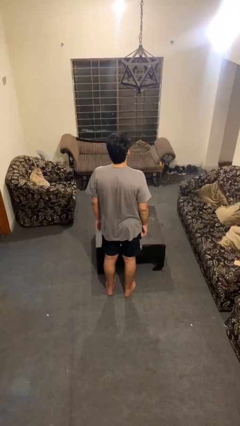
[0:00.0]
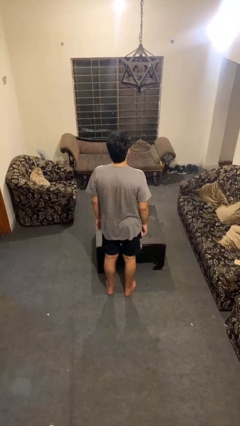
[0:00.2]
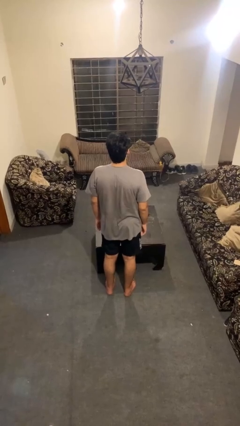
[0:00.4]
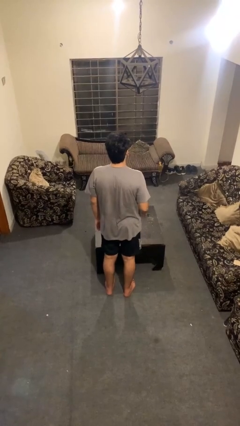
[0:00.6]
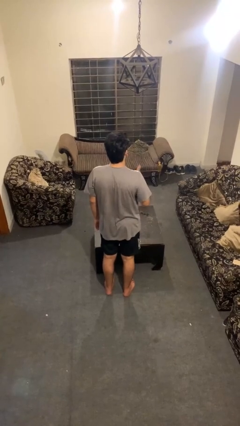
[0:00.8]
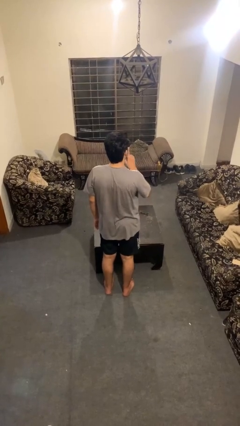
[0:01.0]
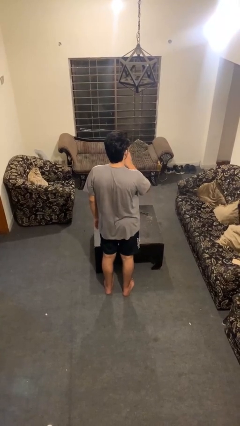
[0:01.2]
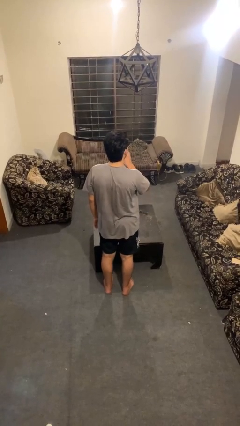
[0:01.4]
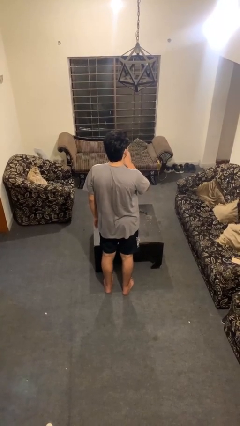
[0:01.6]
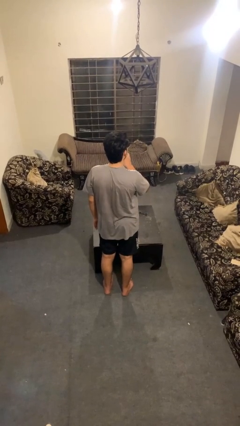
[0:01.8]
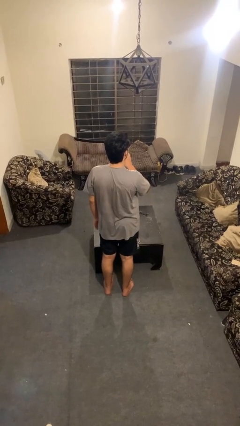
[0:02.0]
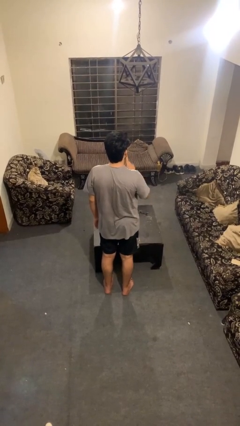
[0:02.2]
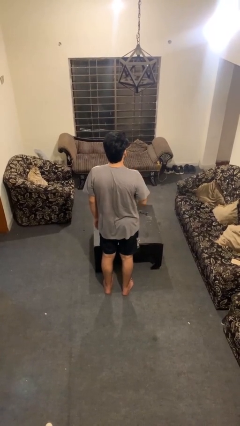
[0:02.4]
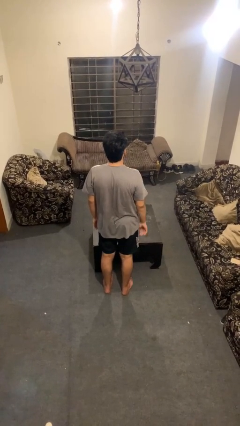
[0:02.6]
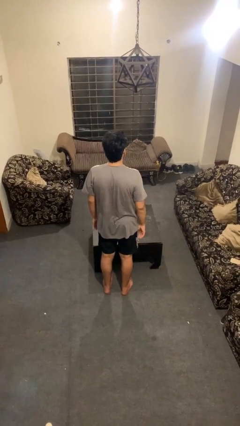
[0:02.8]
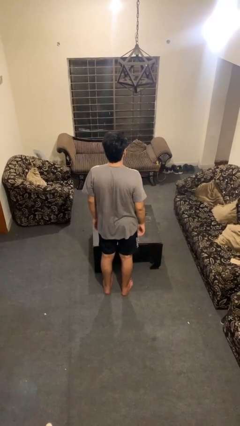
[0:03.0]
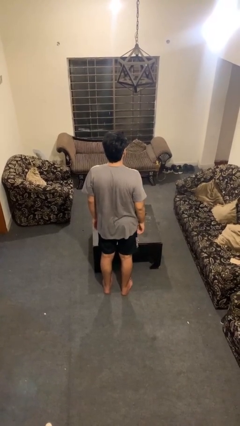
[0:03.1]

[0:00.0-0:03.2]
person gestures be quiet

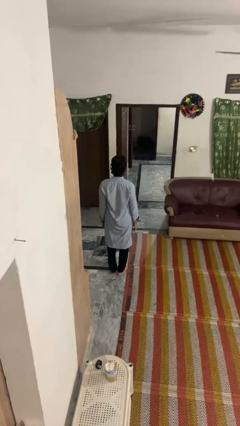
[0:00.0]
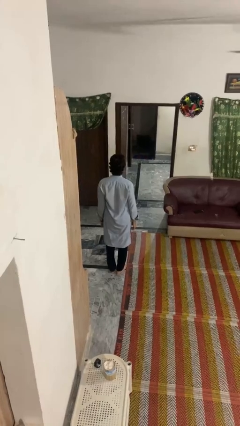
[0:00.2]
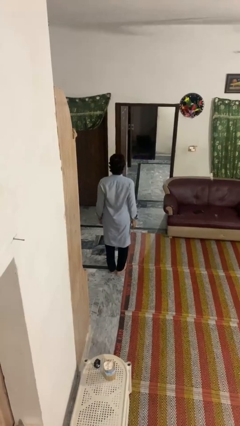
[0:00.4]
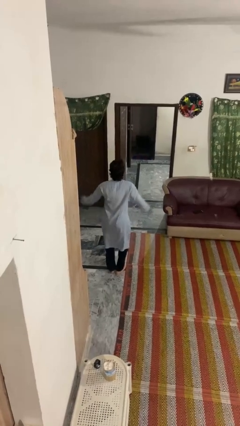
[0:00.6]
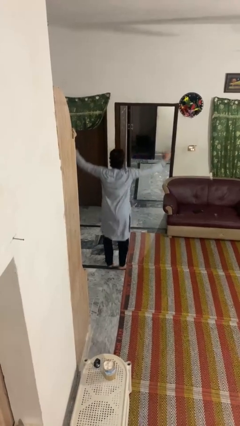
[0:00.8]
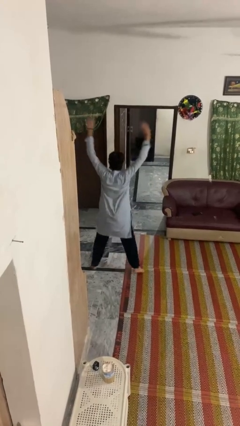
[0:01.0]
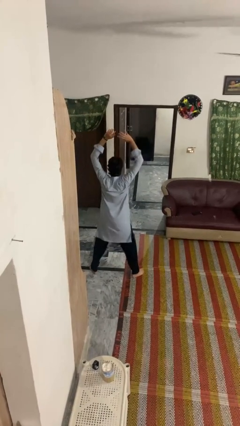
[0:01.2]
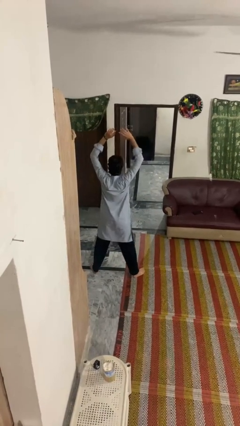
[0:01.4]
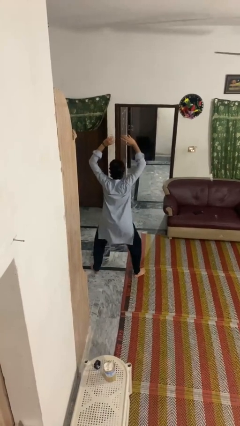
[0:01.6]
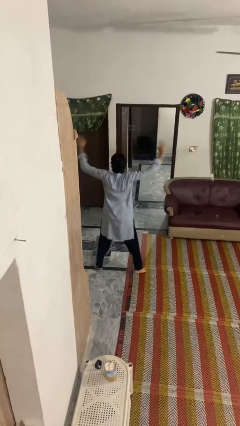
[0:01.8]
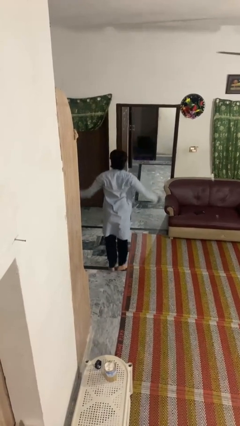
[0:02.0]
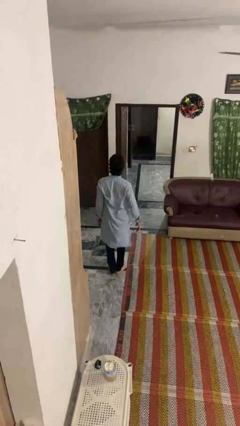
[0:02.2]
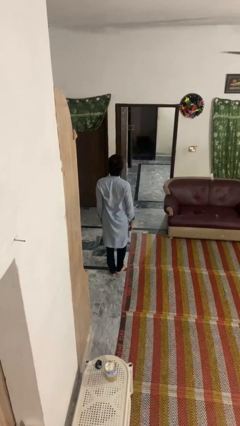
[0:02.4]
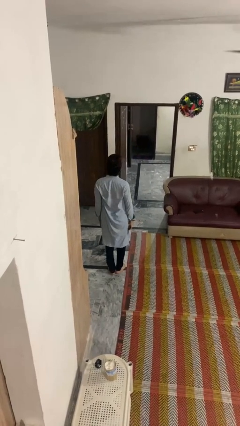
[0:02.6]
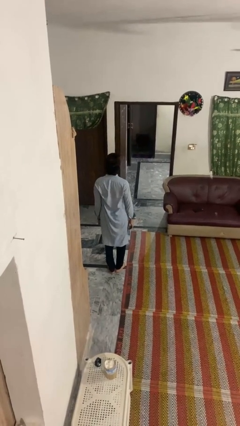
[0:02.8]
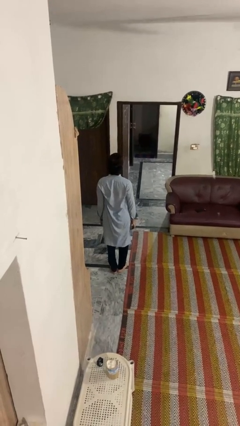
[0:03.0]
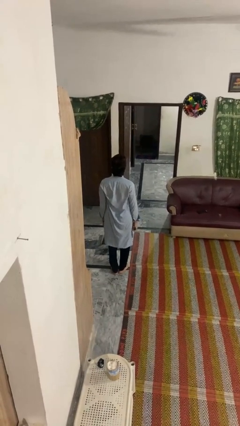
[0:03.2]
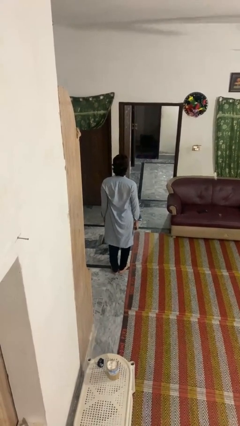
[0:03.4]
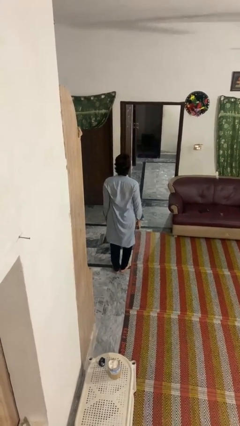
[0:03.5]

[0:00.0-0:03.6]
person exercises with jumping jacks

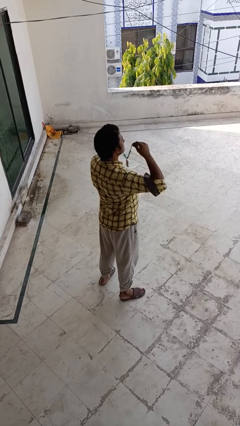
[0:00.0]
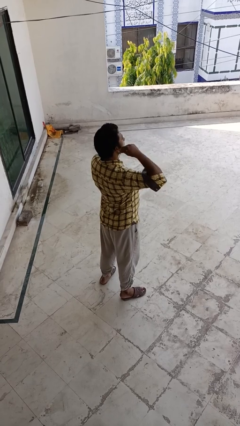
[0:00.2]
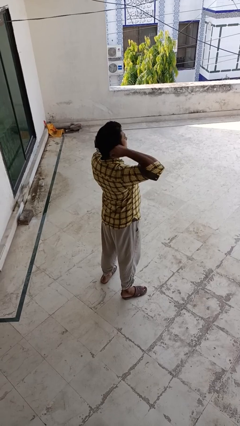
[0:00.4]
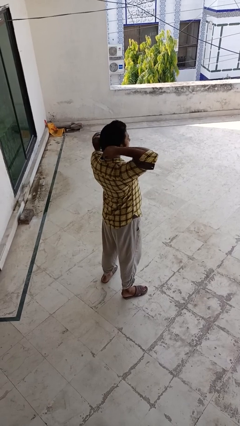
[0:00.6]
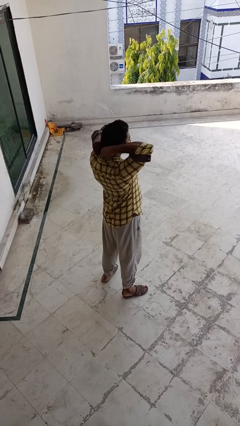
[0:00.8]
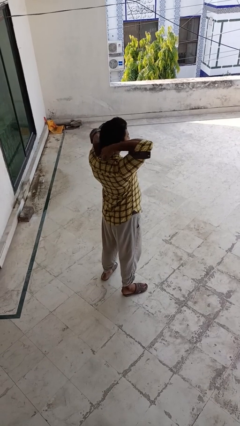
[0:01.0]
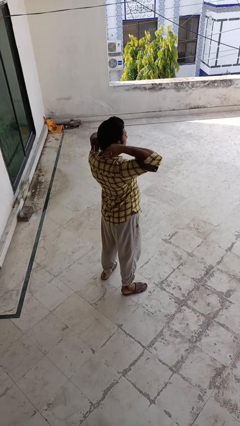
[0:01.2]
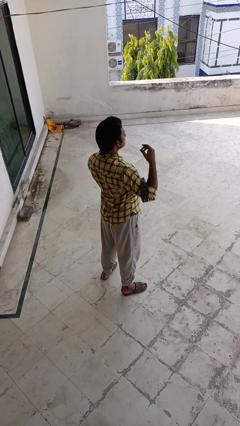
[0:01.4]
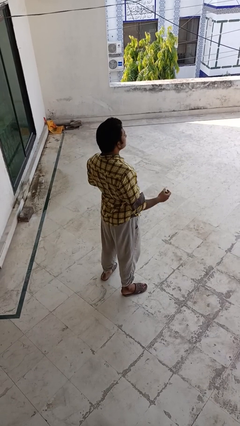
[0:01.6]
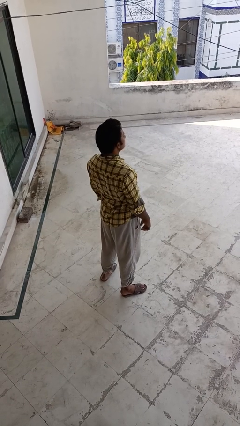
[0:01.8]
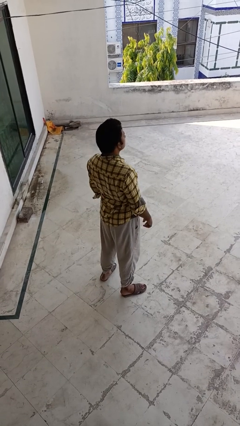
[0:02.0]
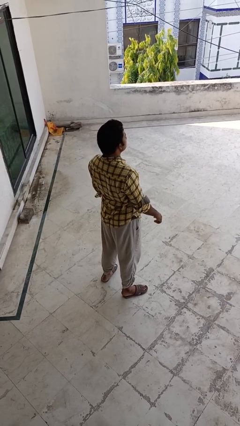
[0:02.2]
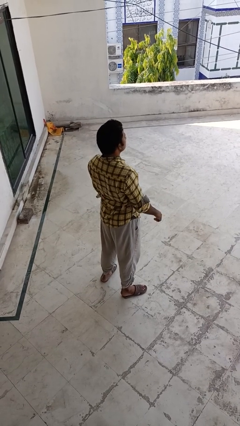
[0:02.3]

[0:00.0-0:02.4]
person puts on necklace

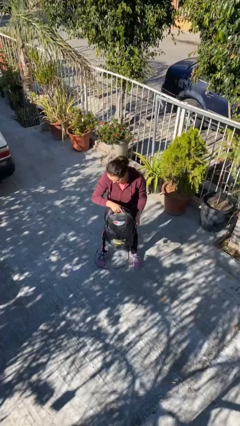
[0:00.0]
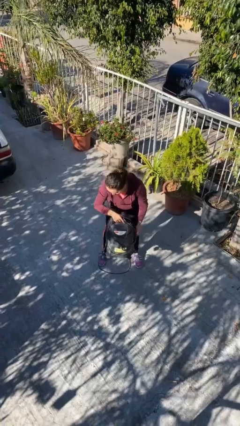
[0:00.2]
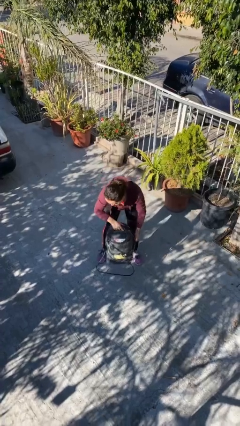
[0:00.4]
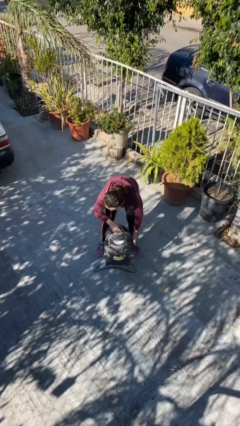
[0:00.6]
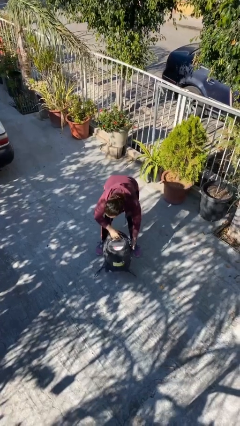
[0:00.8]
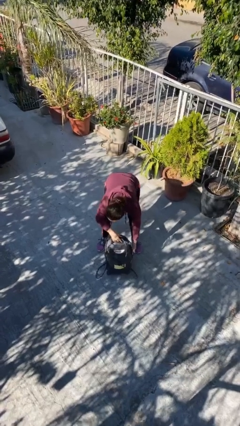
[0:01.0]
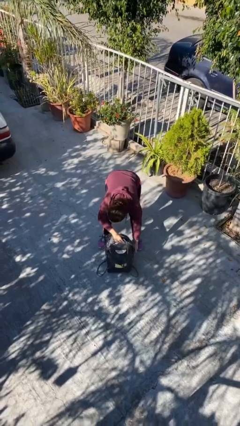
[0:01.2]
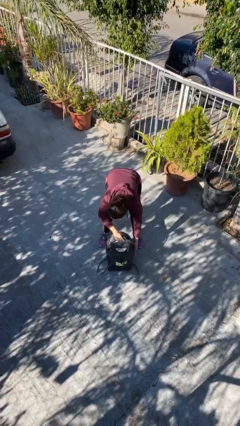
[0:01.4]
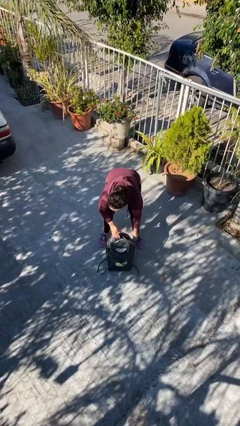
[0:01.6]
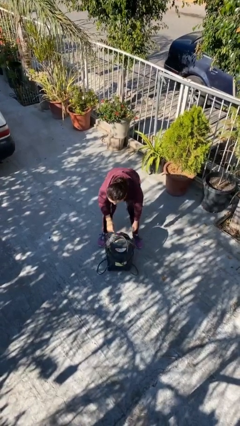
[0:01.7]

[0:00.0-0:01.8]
person puts down object on floor

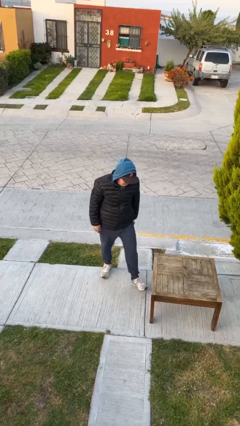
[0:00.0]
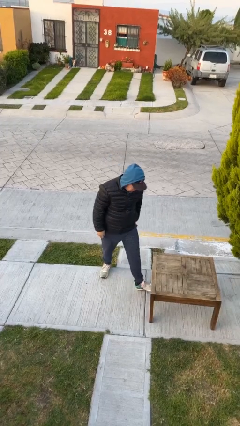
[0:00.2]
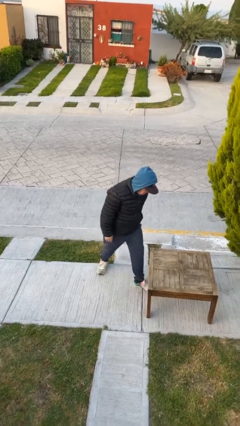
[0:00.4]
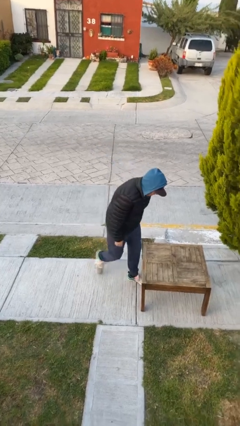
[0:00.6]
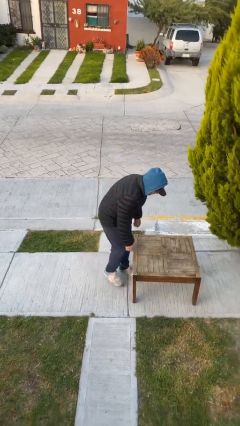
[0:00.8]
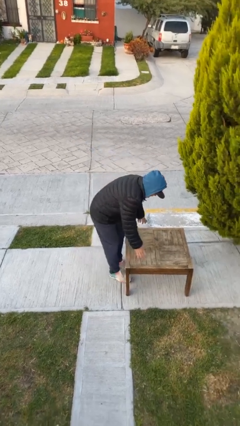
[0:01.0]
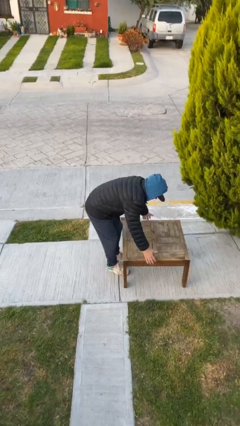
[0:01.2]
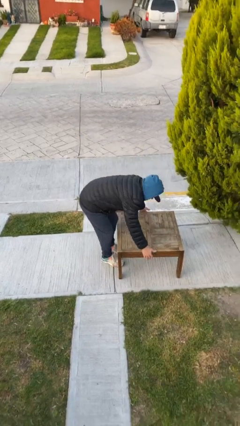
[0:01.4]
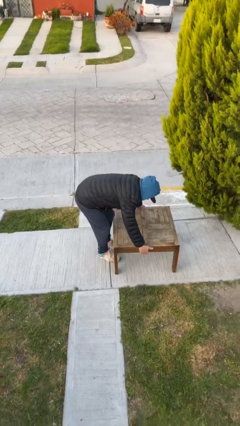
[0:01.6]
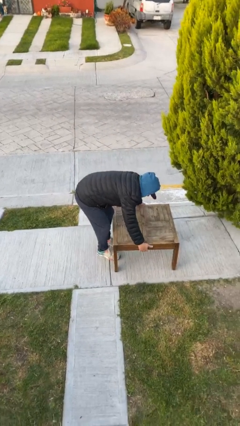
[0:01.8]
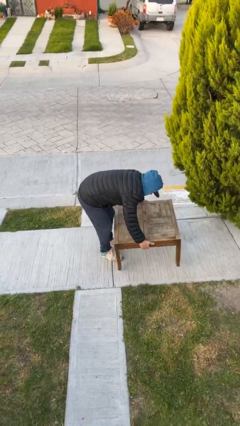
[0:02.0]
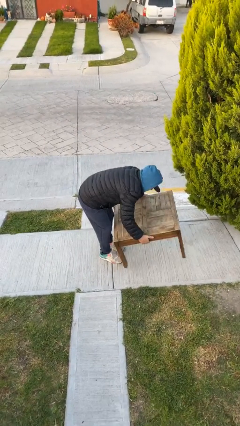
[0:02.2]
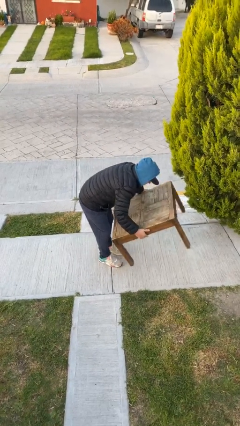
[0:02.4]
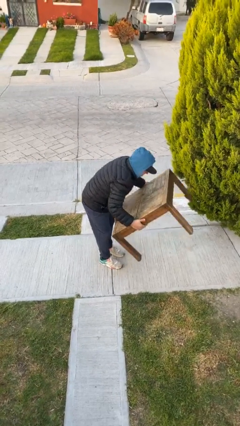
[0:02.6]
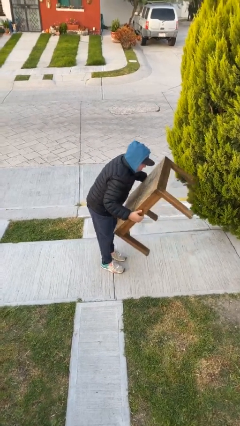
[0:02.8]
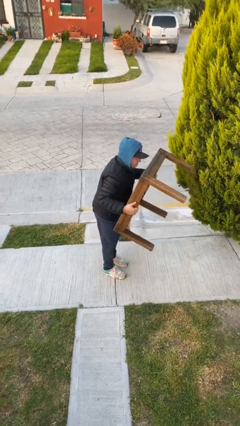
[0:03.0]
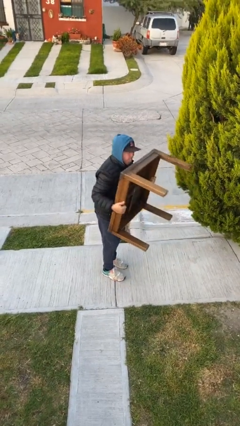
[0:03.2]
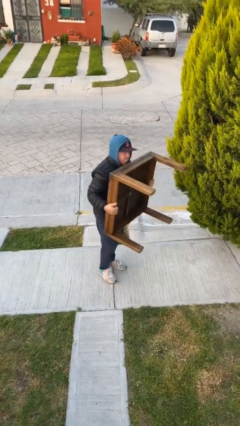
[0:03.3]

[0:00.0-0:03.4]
person picks up object from floor

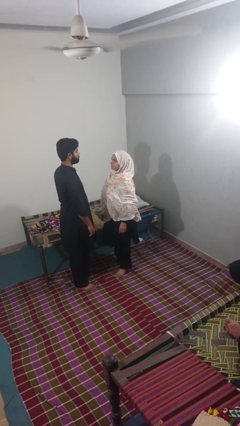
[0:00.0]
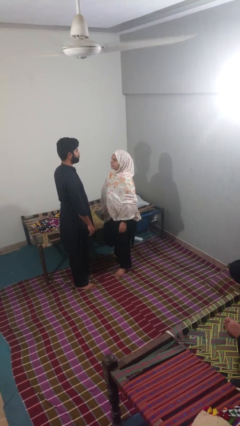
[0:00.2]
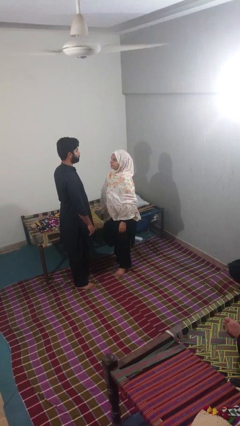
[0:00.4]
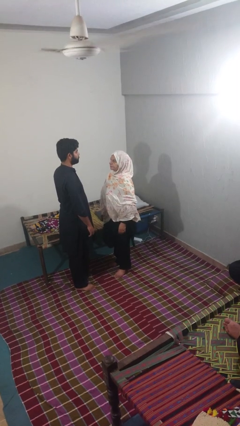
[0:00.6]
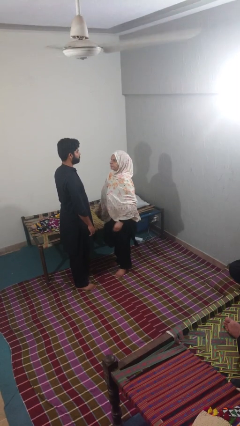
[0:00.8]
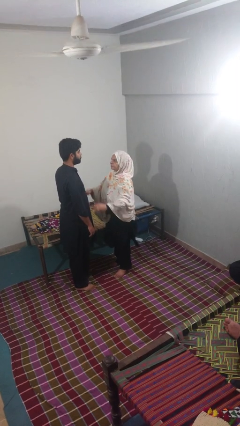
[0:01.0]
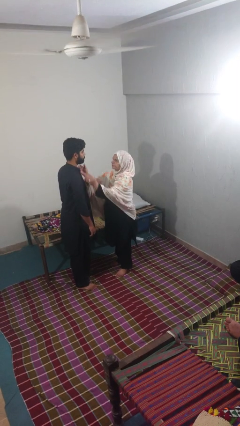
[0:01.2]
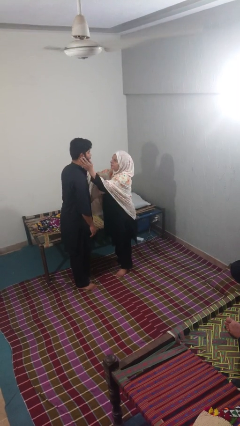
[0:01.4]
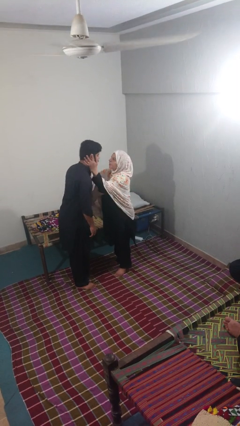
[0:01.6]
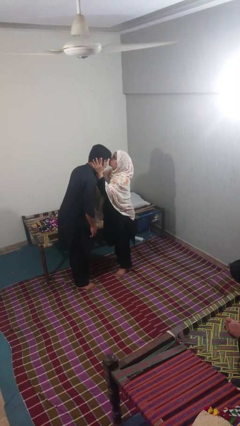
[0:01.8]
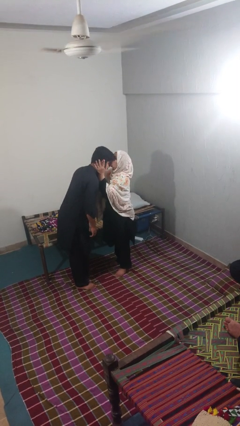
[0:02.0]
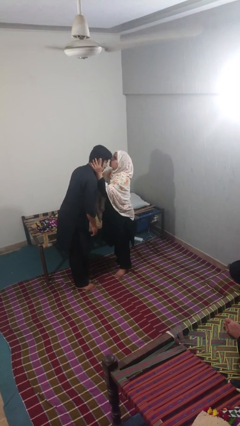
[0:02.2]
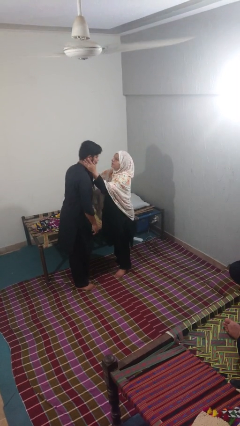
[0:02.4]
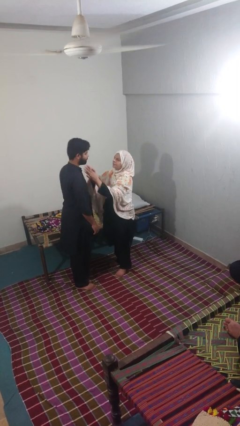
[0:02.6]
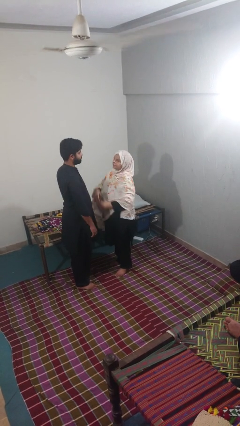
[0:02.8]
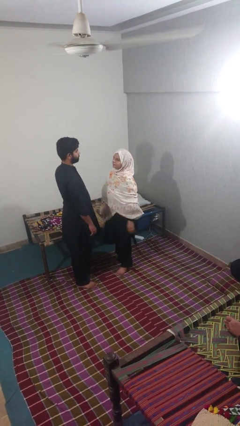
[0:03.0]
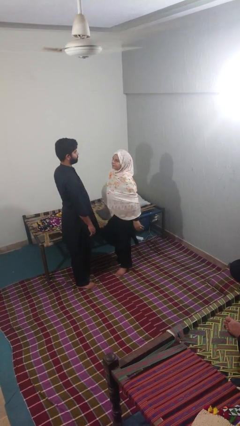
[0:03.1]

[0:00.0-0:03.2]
person kisses cheek of person
